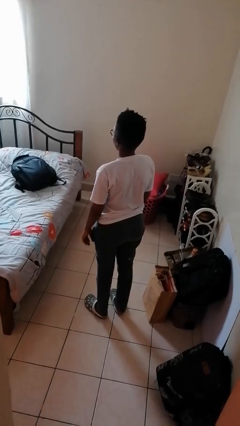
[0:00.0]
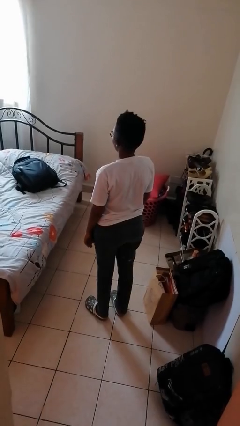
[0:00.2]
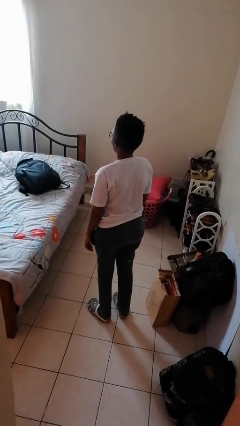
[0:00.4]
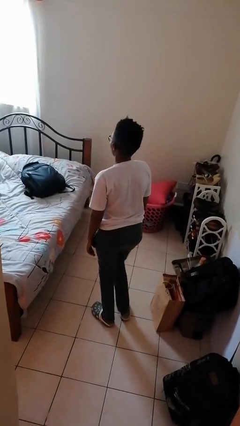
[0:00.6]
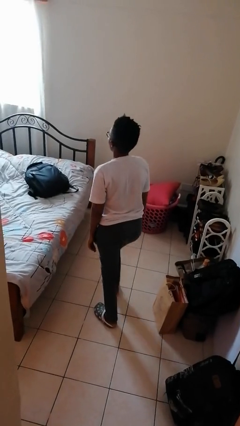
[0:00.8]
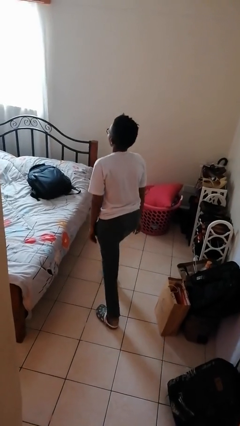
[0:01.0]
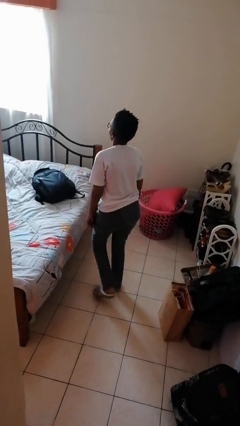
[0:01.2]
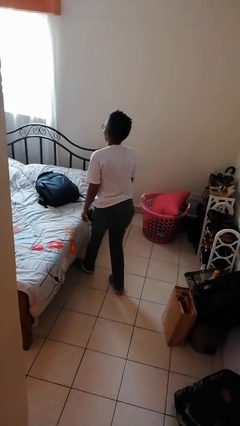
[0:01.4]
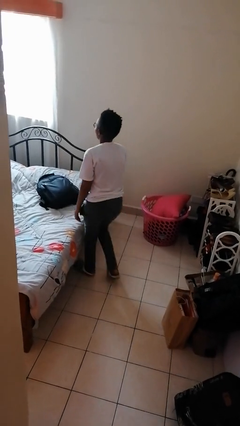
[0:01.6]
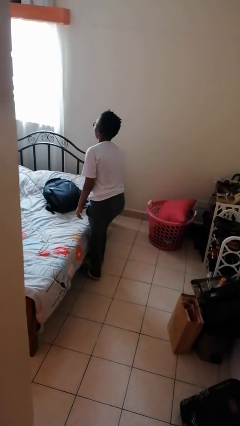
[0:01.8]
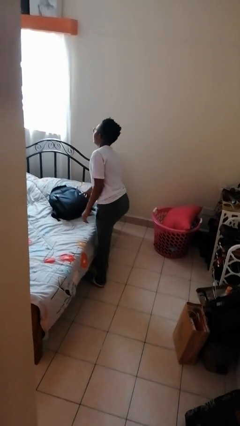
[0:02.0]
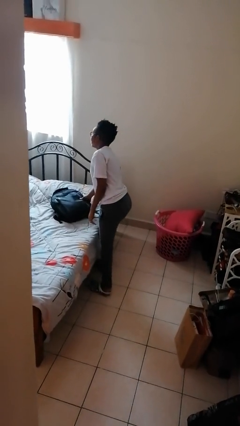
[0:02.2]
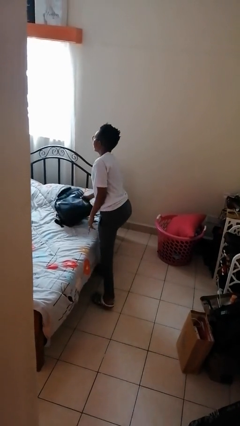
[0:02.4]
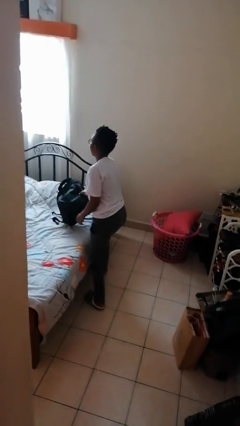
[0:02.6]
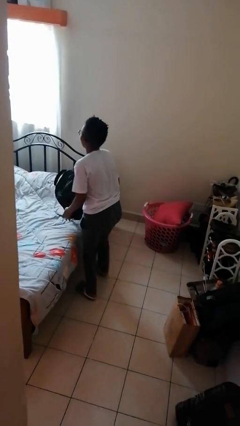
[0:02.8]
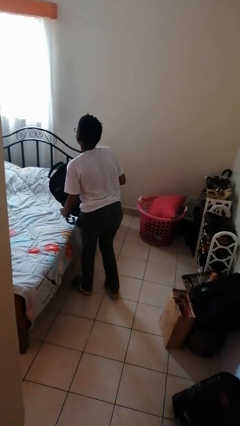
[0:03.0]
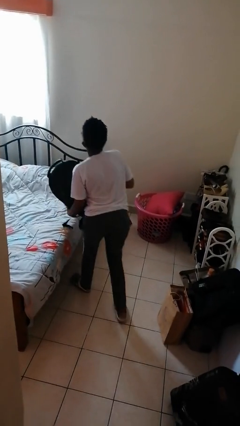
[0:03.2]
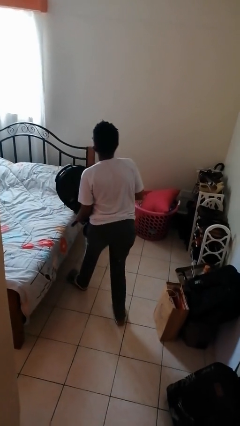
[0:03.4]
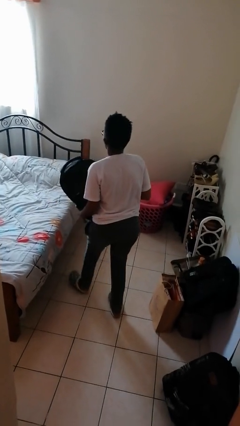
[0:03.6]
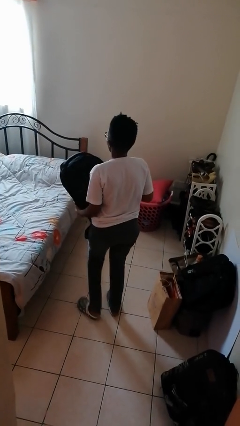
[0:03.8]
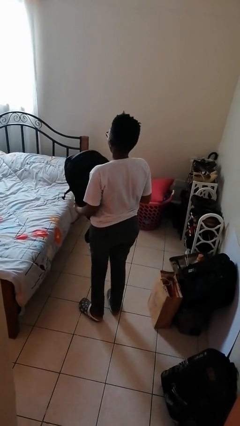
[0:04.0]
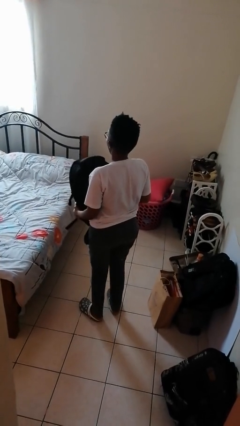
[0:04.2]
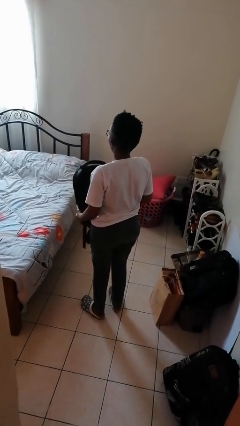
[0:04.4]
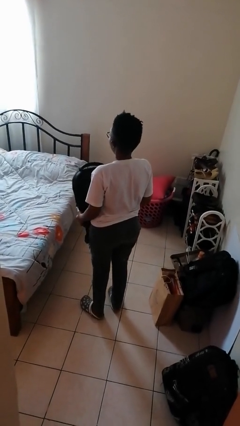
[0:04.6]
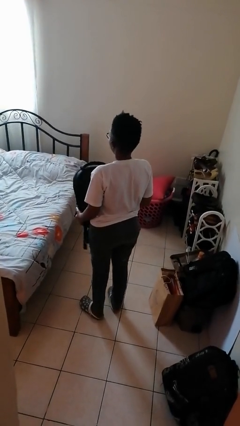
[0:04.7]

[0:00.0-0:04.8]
person picks up object from bed

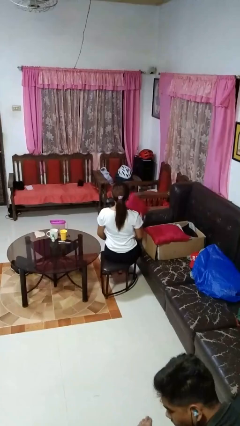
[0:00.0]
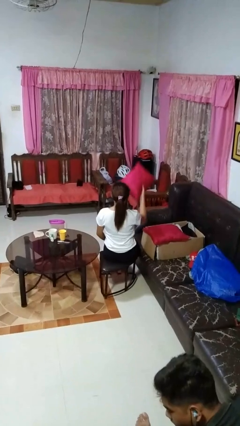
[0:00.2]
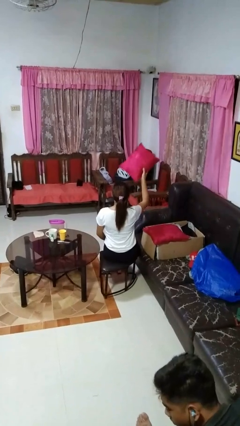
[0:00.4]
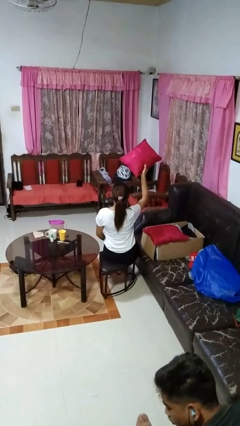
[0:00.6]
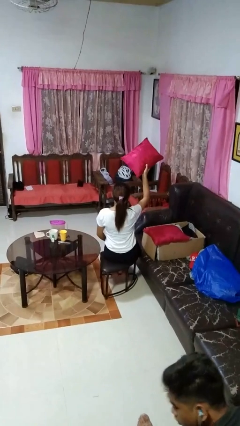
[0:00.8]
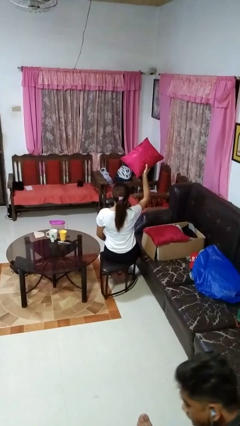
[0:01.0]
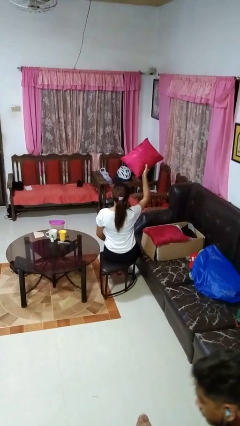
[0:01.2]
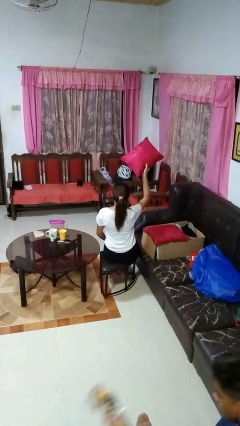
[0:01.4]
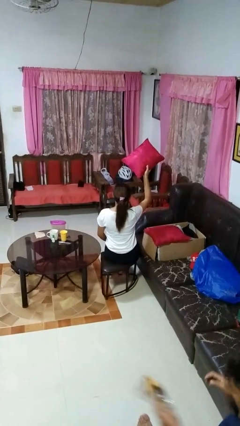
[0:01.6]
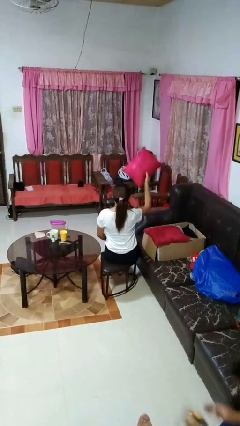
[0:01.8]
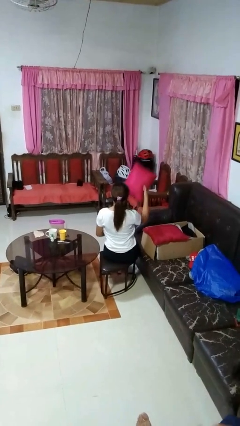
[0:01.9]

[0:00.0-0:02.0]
person holds object above head

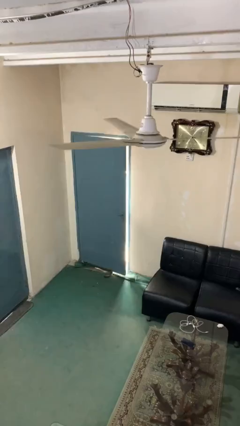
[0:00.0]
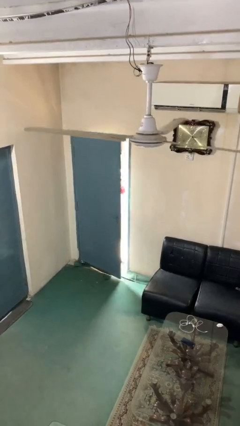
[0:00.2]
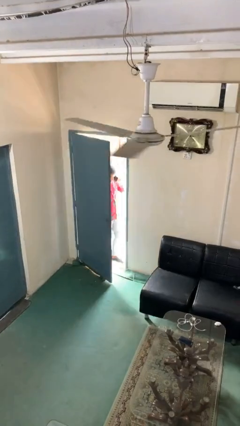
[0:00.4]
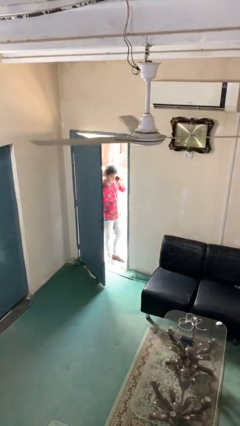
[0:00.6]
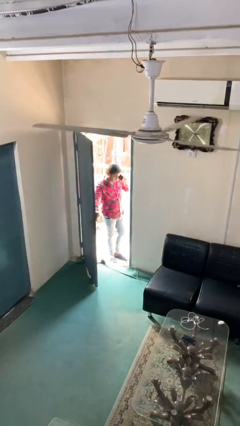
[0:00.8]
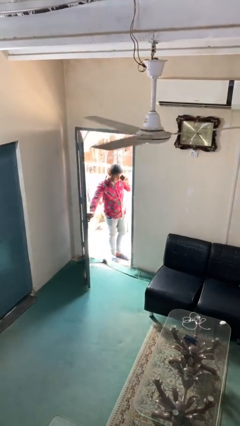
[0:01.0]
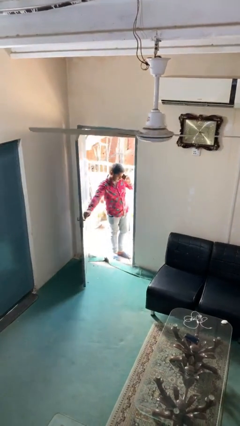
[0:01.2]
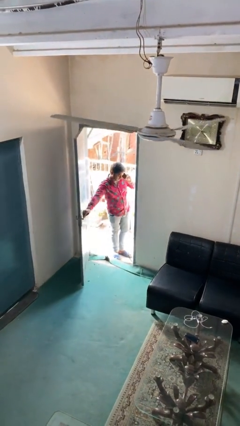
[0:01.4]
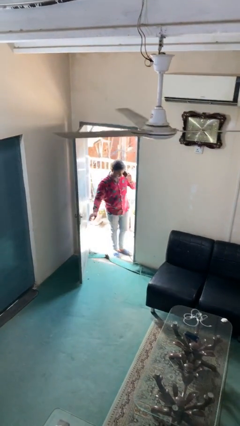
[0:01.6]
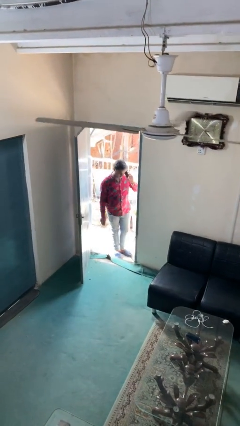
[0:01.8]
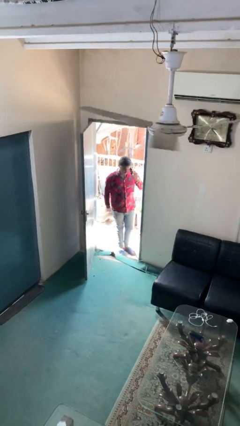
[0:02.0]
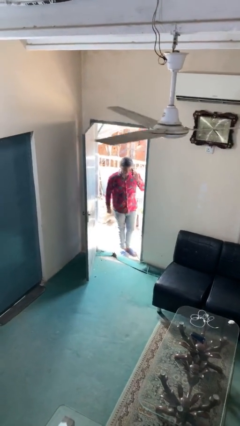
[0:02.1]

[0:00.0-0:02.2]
person opens facility door

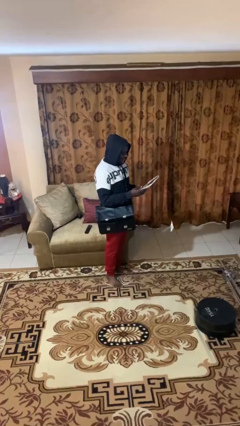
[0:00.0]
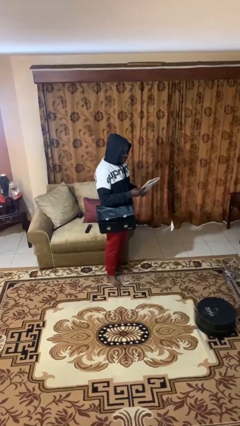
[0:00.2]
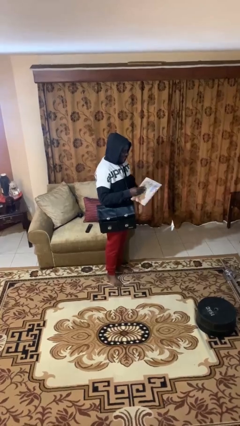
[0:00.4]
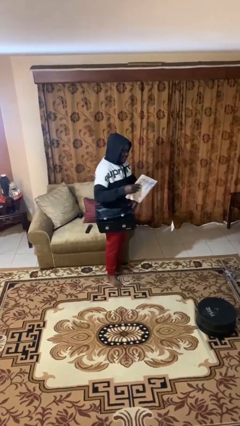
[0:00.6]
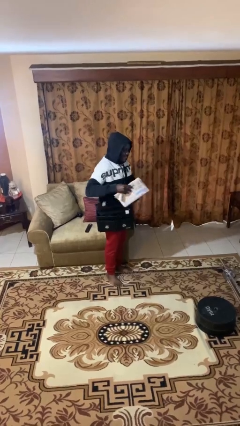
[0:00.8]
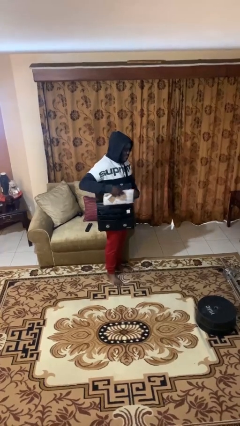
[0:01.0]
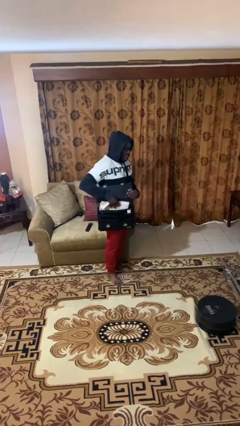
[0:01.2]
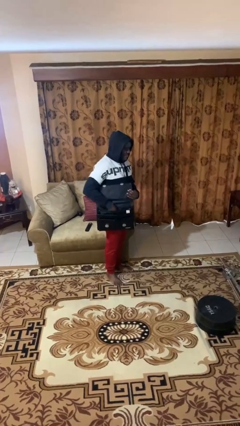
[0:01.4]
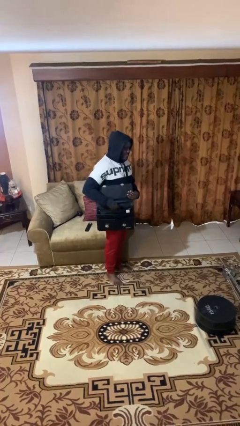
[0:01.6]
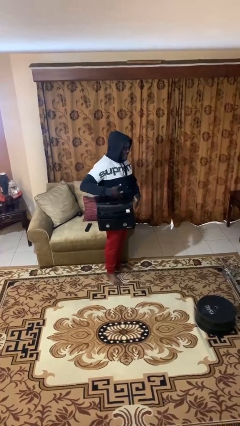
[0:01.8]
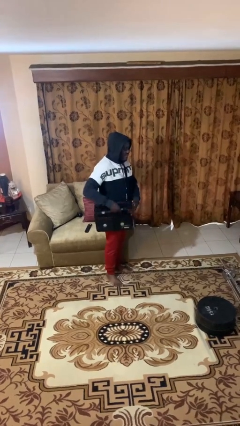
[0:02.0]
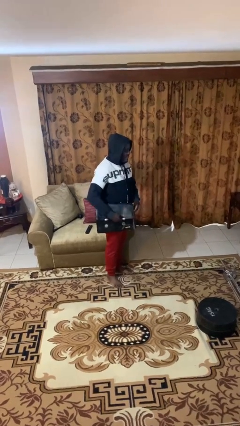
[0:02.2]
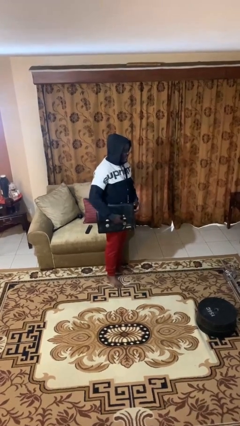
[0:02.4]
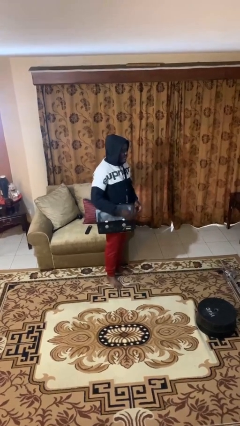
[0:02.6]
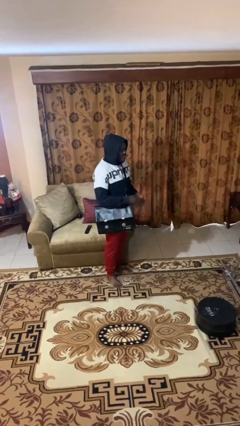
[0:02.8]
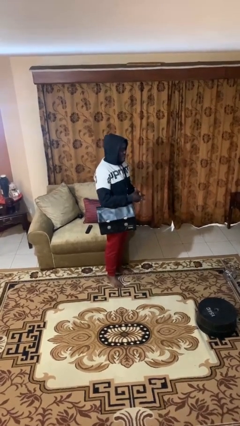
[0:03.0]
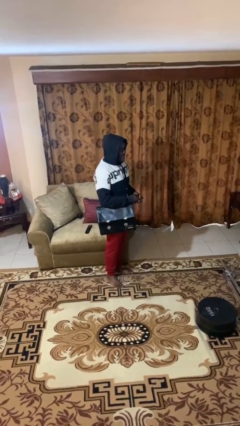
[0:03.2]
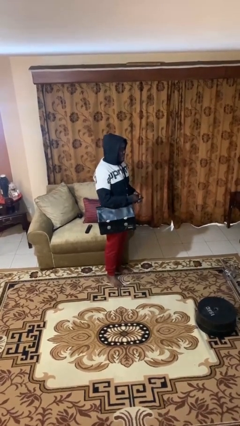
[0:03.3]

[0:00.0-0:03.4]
person puts object into purse

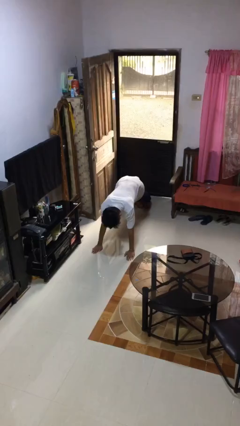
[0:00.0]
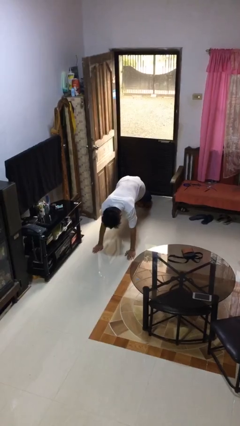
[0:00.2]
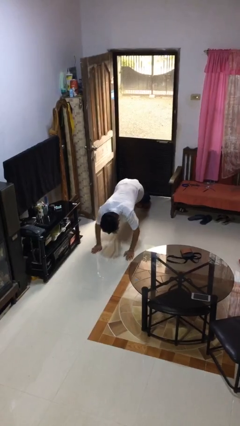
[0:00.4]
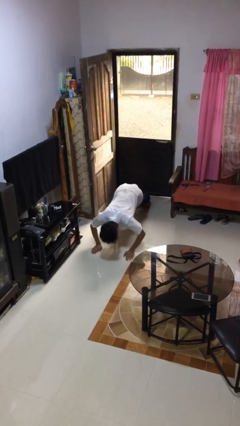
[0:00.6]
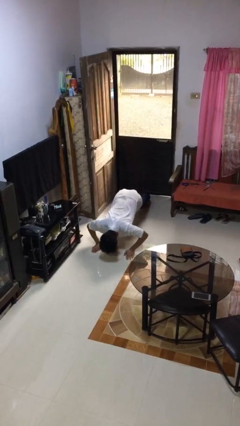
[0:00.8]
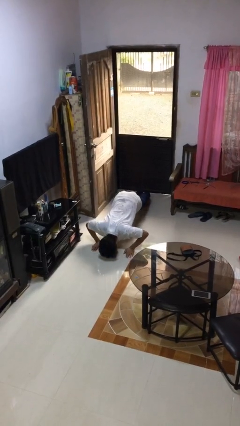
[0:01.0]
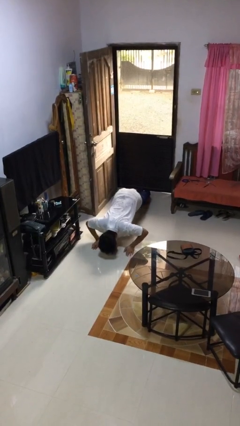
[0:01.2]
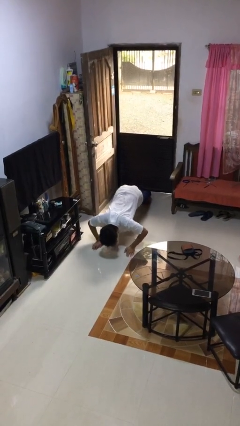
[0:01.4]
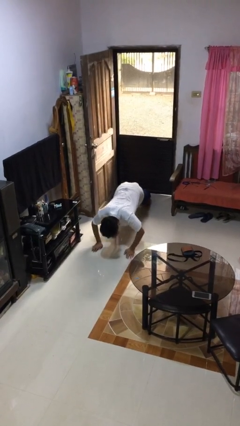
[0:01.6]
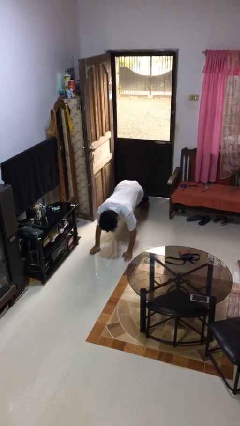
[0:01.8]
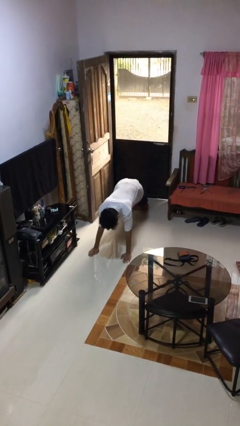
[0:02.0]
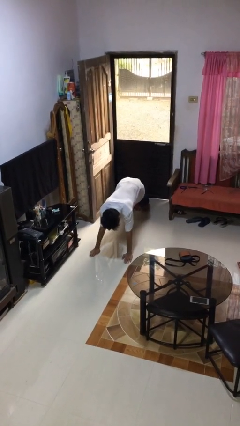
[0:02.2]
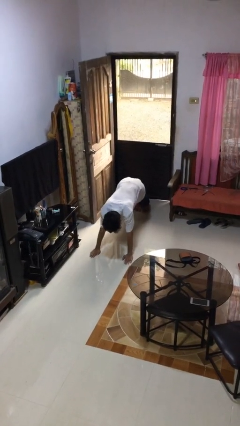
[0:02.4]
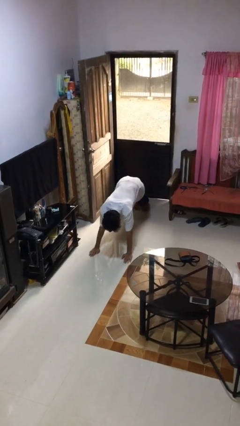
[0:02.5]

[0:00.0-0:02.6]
person exercises with pushup

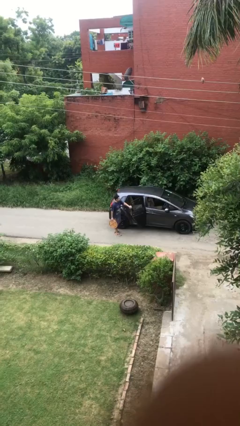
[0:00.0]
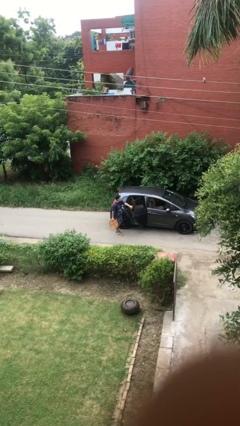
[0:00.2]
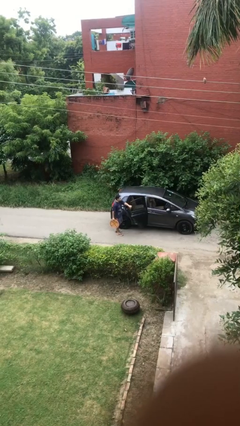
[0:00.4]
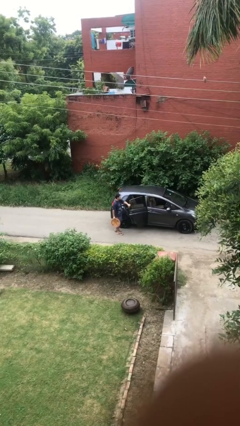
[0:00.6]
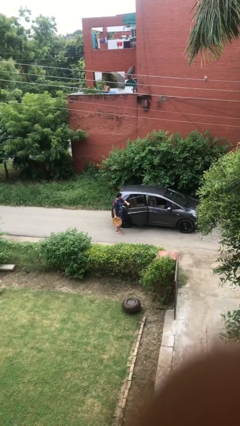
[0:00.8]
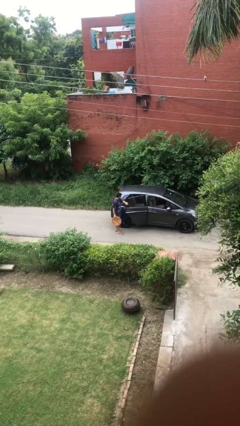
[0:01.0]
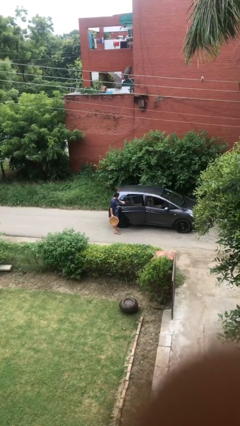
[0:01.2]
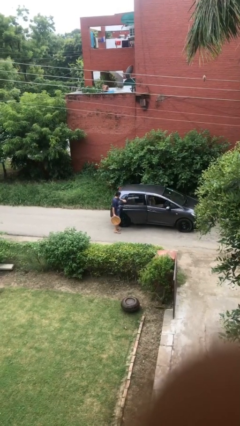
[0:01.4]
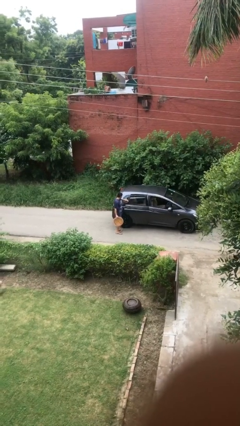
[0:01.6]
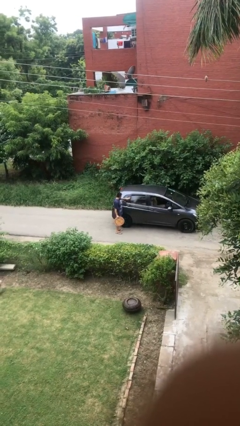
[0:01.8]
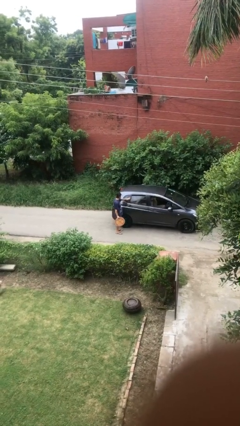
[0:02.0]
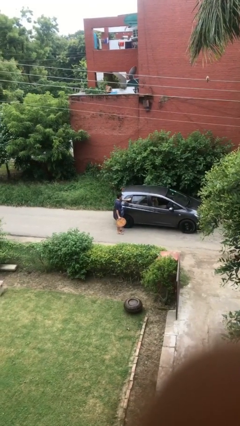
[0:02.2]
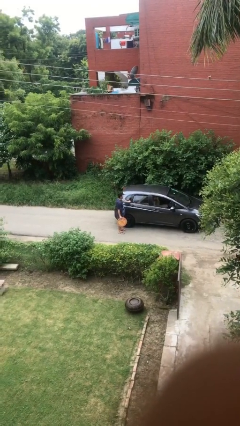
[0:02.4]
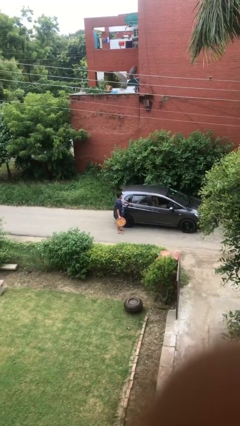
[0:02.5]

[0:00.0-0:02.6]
person closes car door
